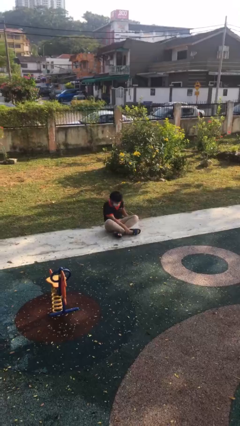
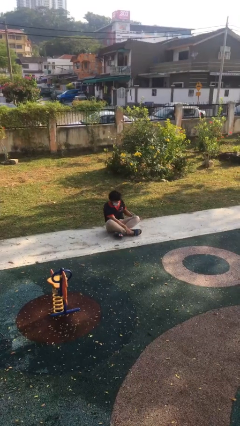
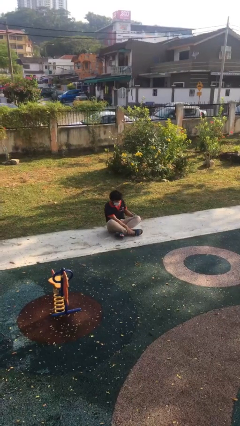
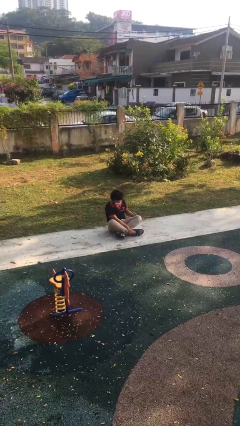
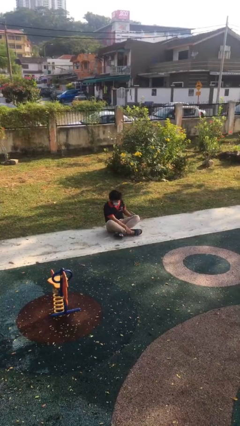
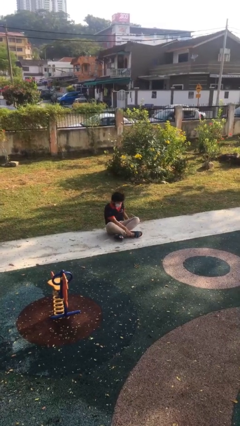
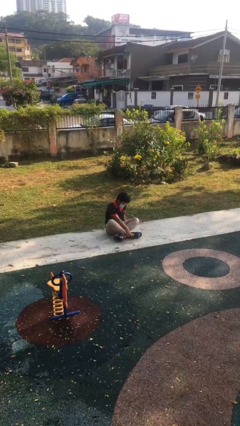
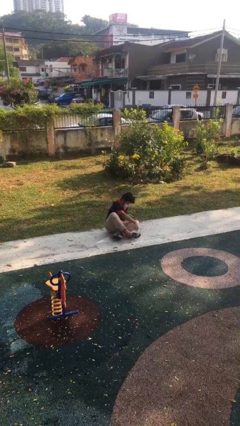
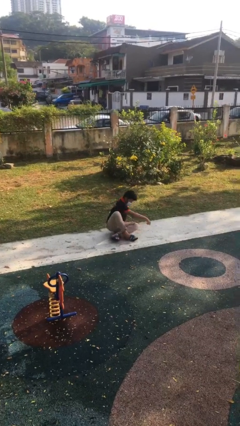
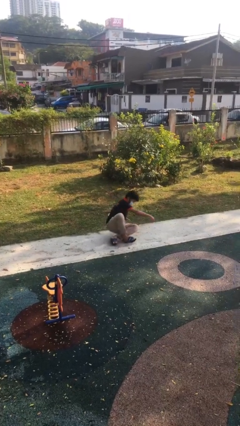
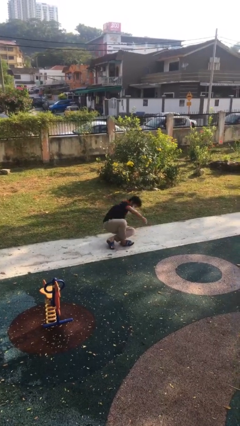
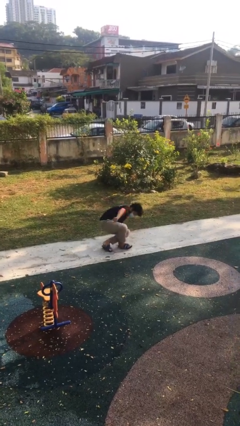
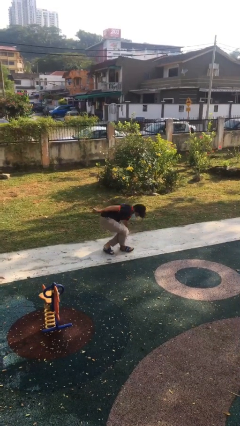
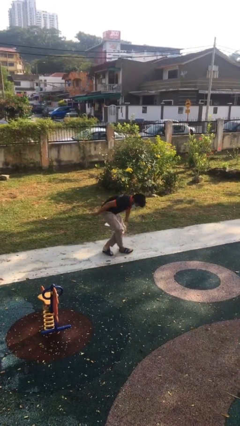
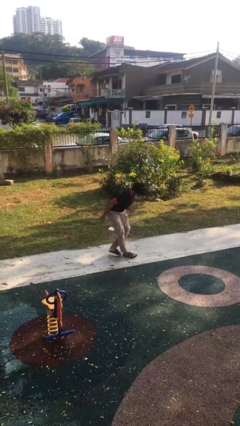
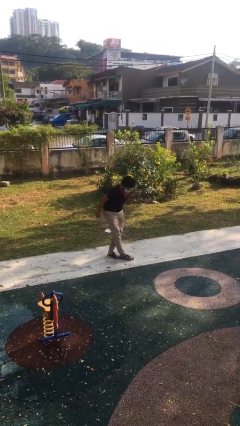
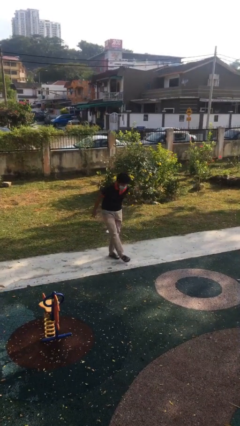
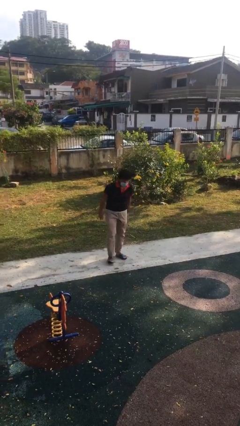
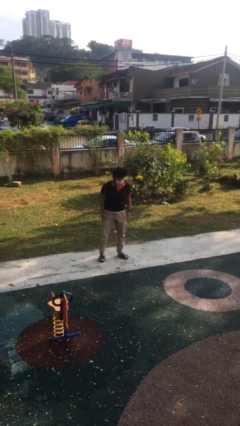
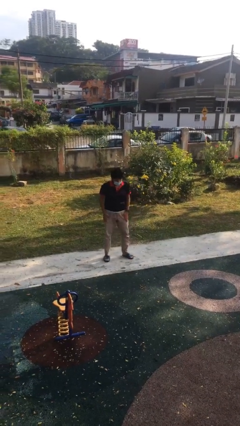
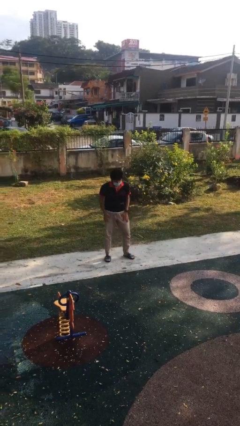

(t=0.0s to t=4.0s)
person stands up from floor

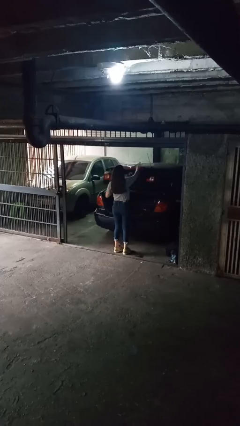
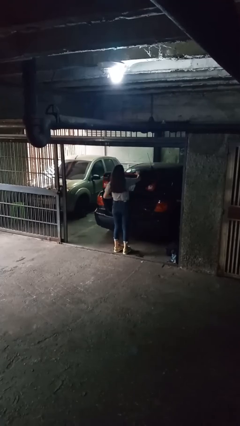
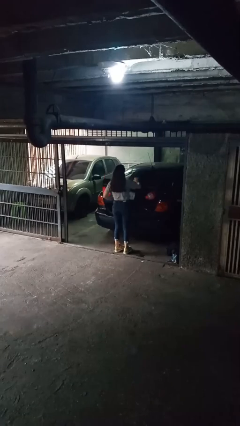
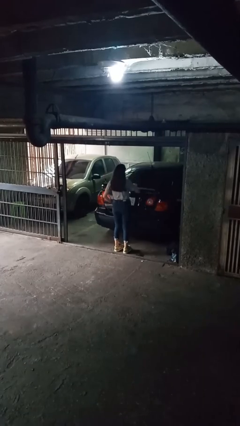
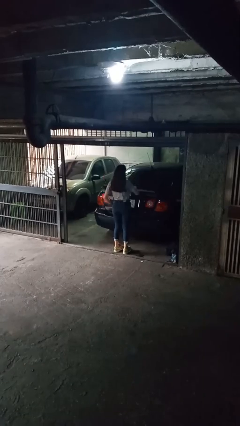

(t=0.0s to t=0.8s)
person closes car trunk

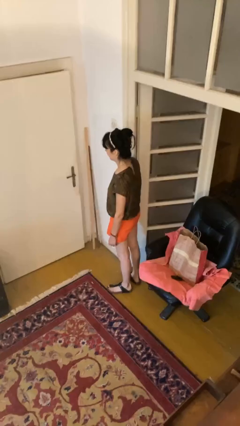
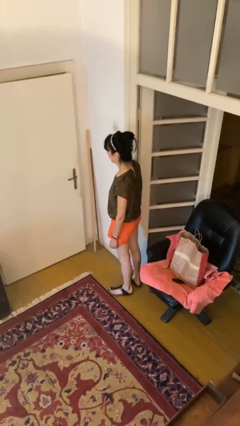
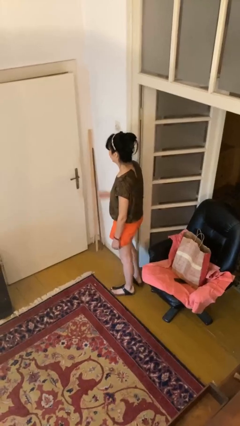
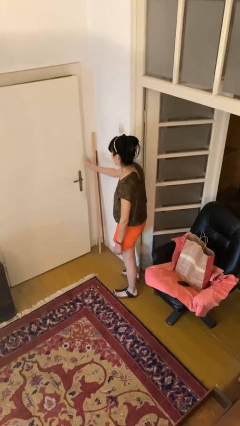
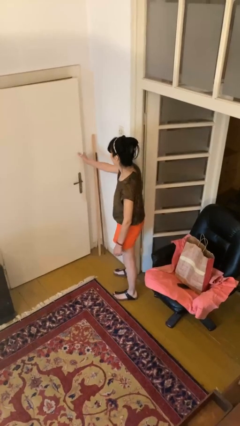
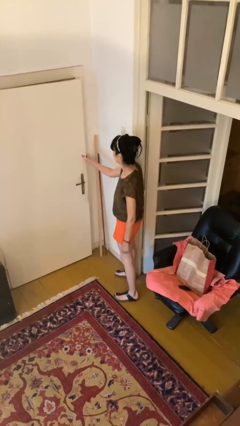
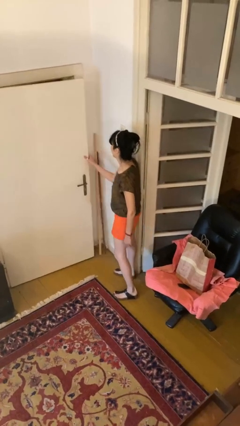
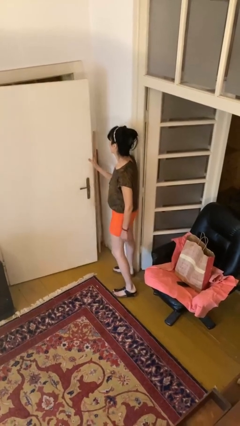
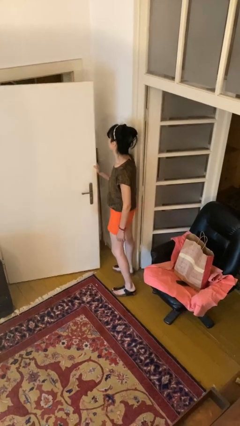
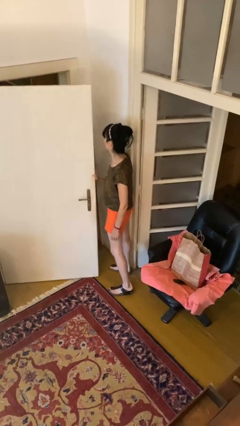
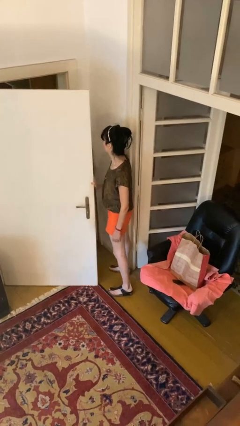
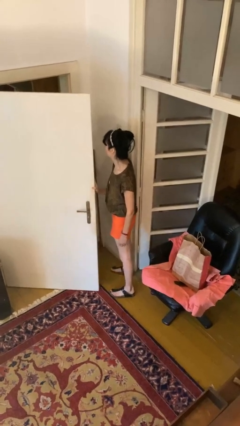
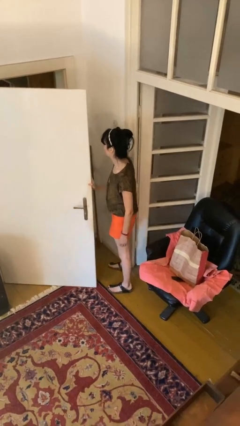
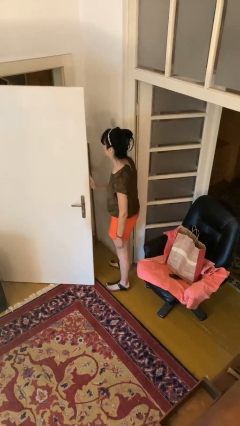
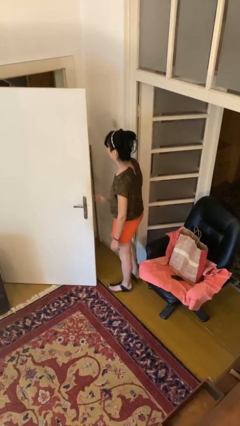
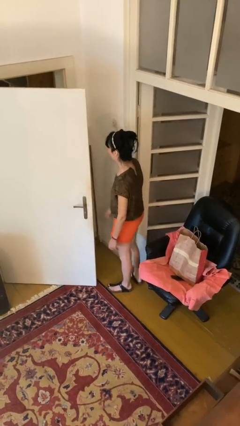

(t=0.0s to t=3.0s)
person opens facility door

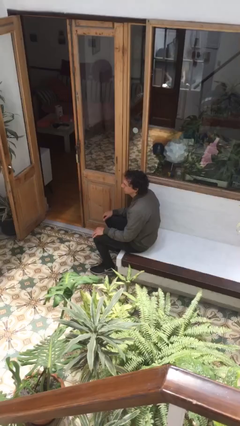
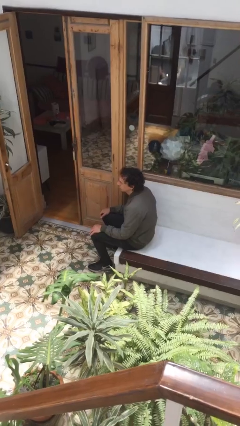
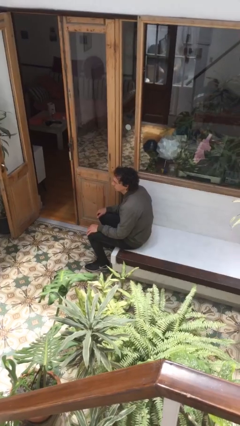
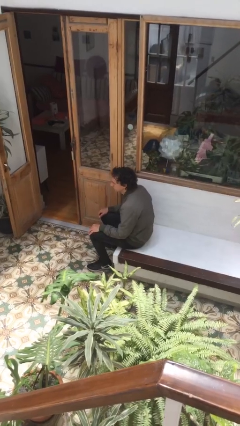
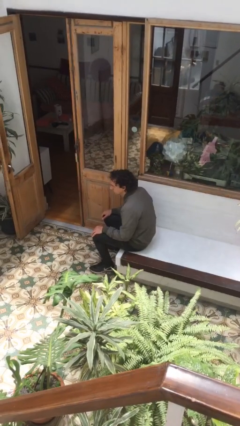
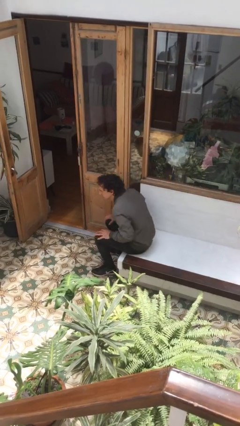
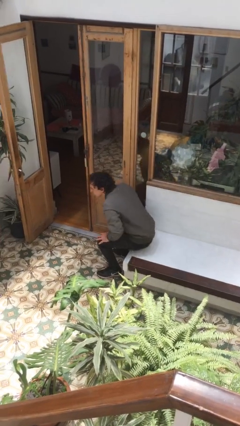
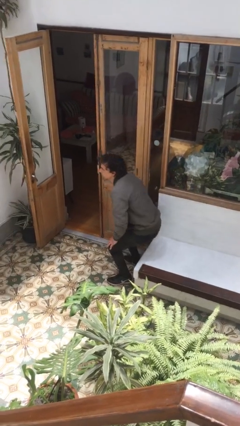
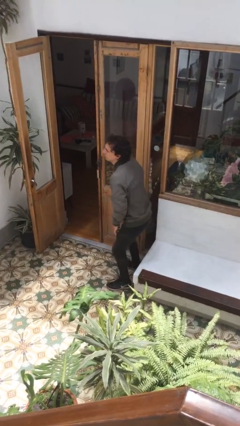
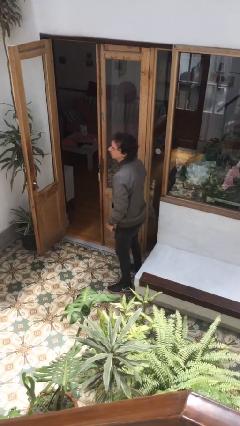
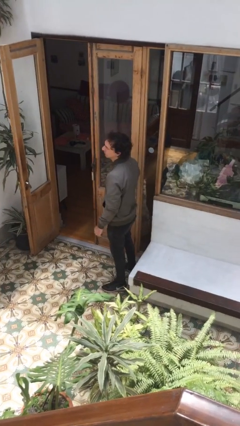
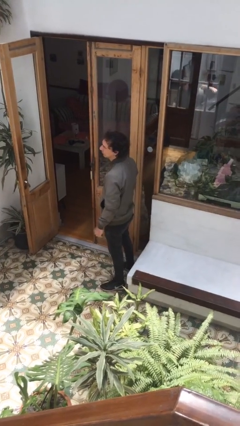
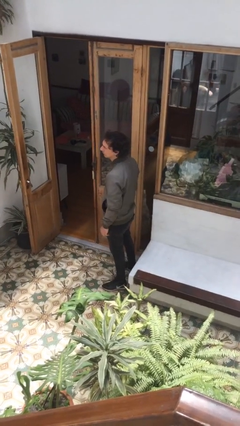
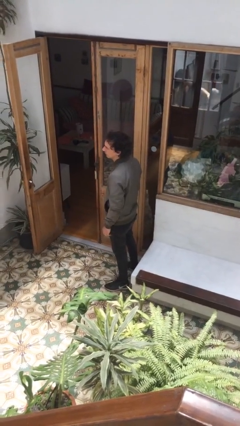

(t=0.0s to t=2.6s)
person stands up

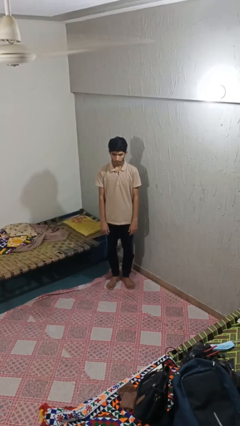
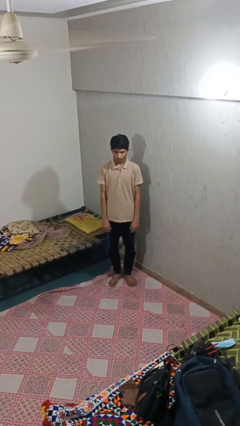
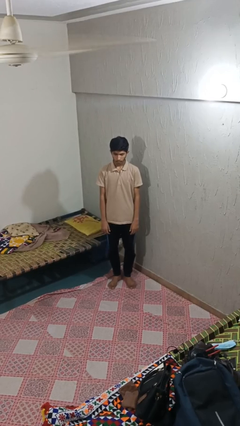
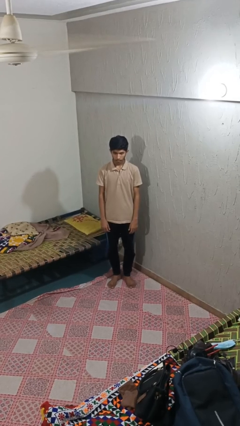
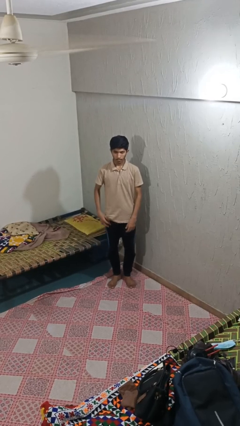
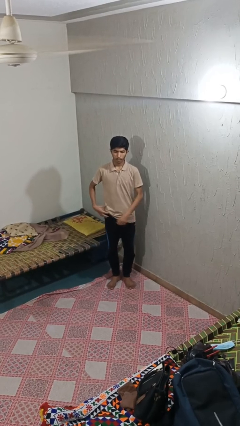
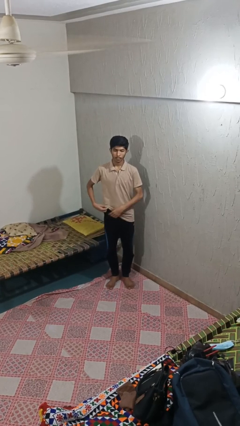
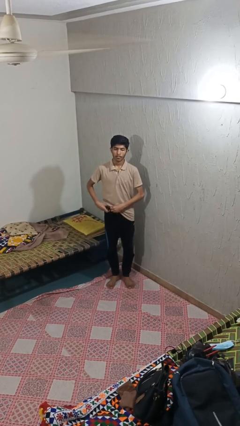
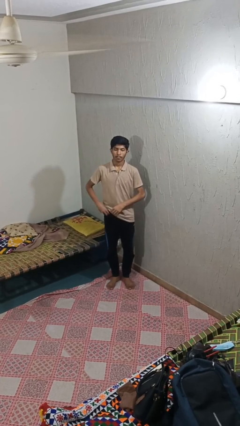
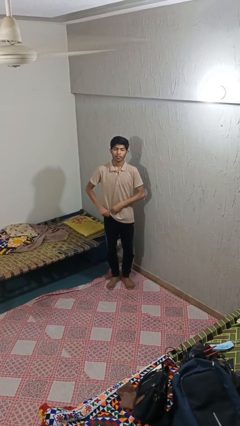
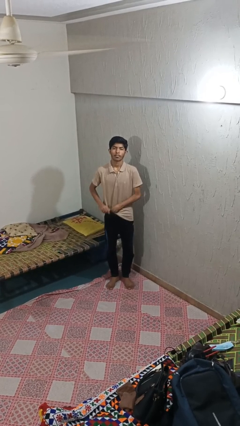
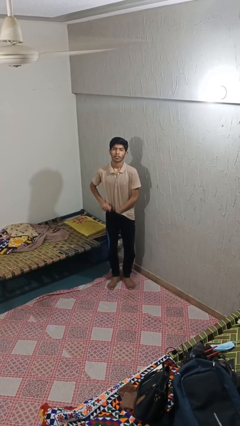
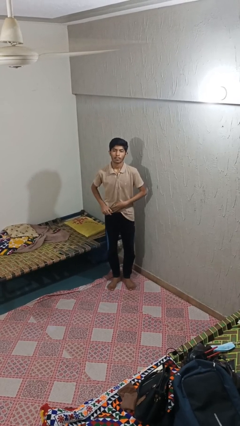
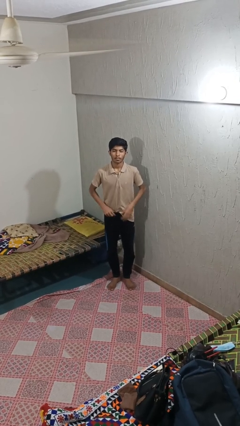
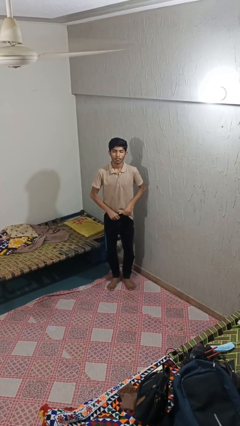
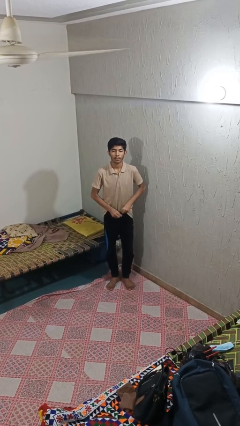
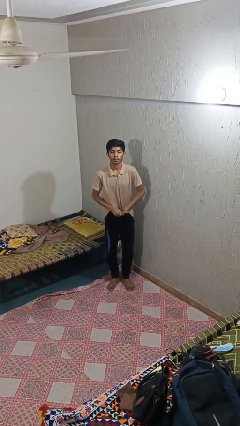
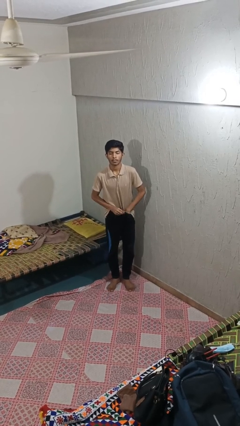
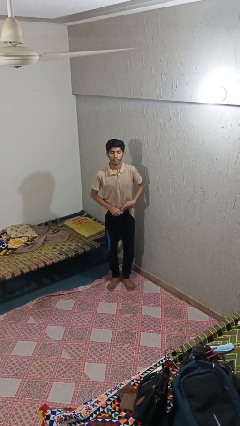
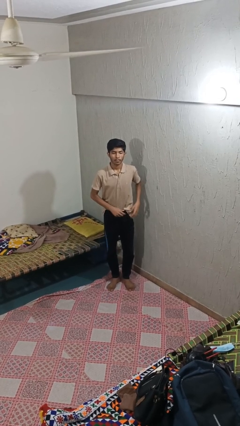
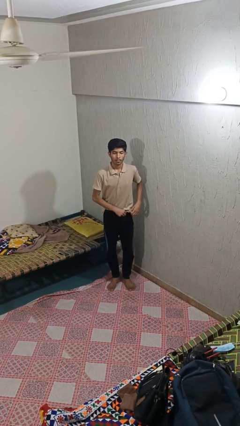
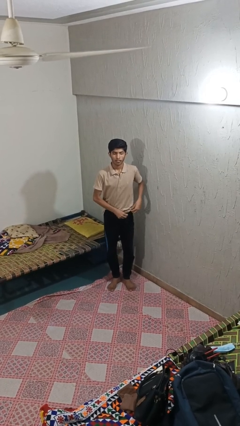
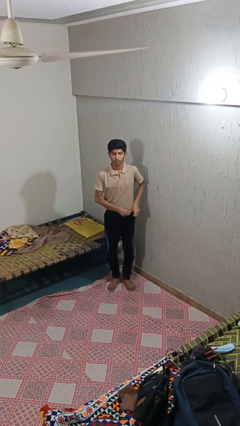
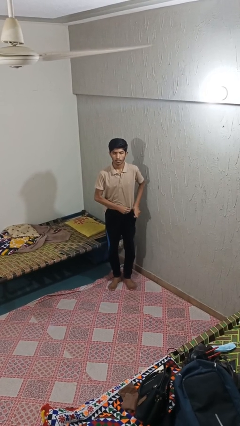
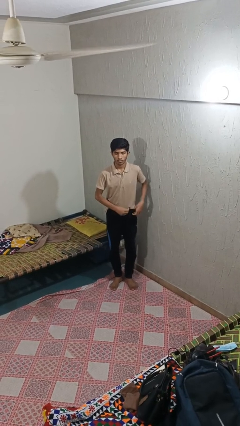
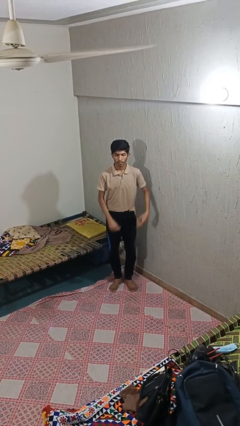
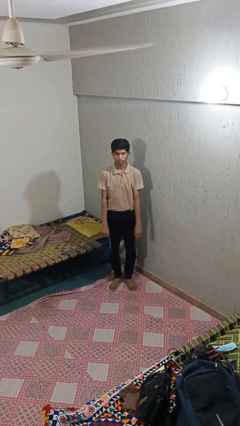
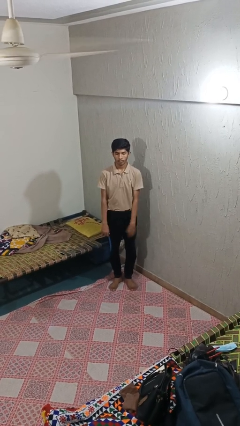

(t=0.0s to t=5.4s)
person tucks in shirt

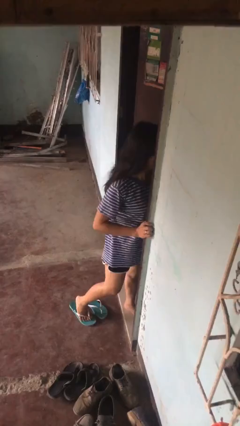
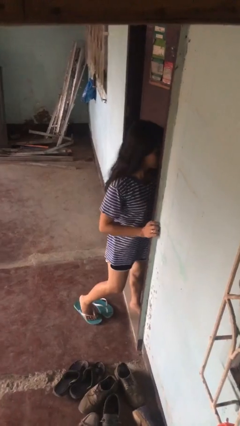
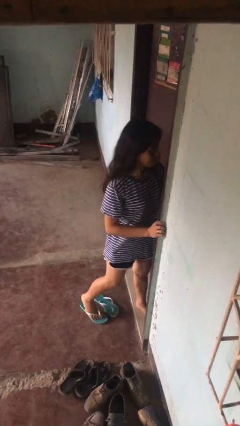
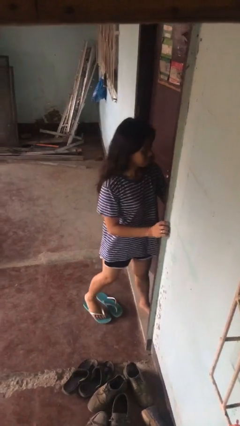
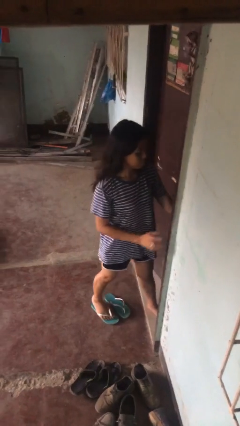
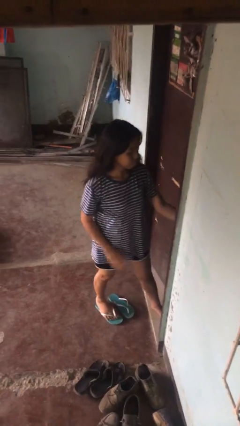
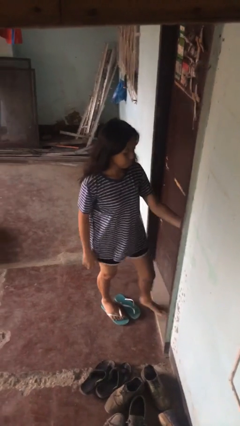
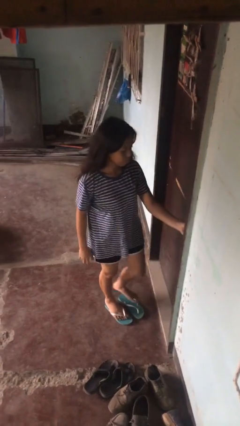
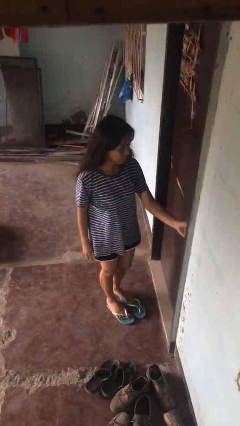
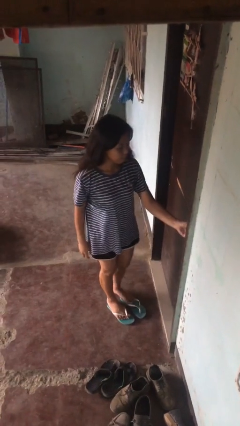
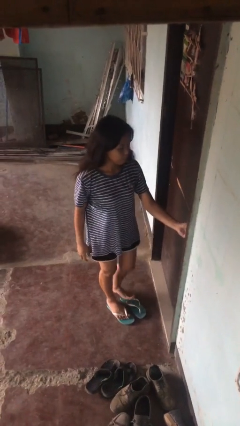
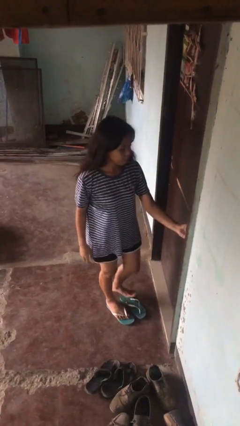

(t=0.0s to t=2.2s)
person closes facility door
